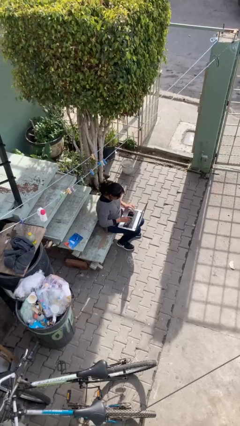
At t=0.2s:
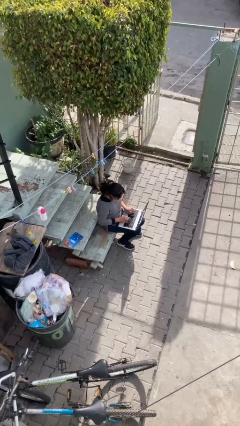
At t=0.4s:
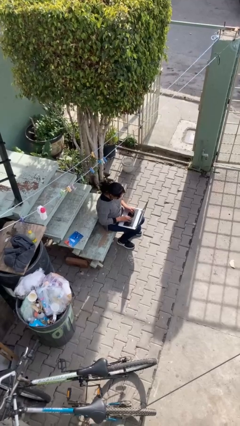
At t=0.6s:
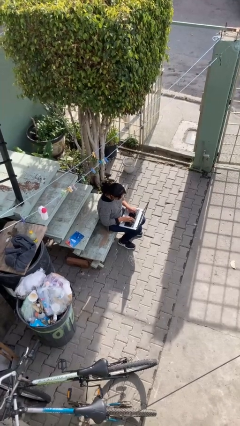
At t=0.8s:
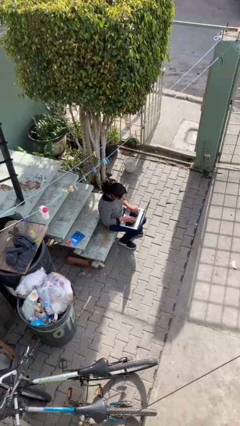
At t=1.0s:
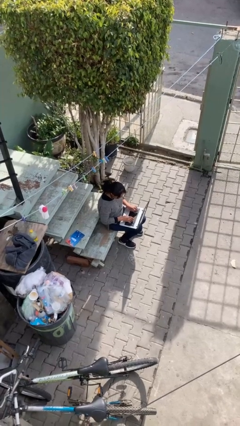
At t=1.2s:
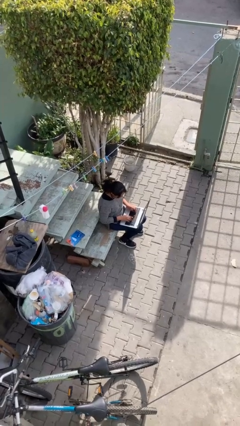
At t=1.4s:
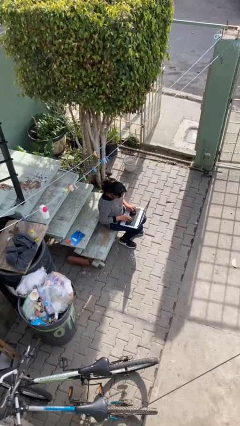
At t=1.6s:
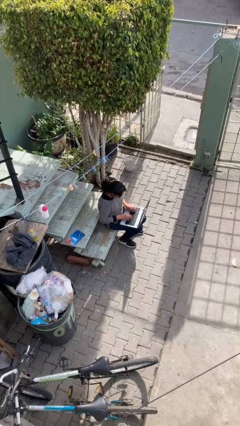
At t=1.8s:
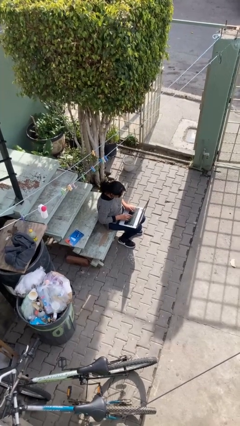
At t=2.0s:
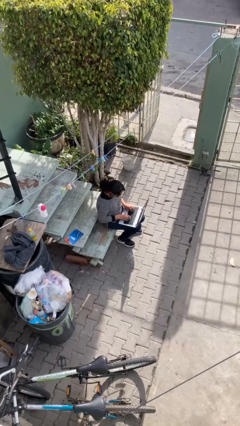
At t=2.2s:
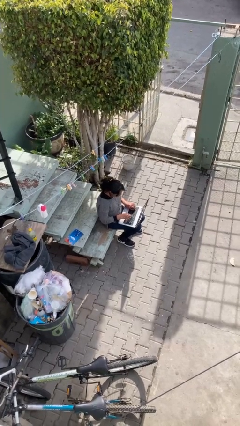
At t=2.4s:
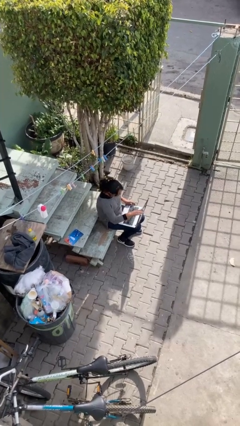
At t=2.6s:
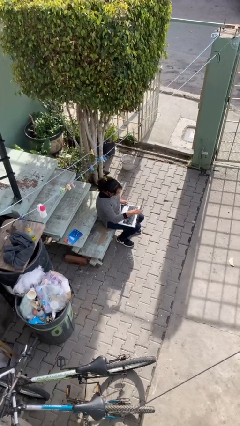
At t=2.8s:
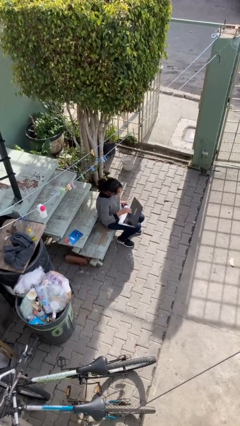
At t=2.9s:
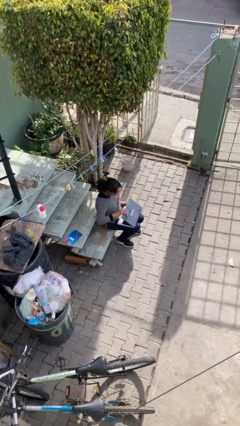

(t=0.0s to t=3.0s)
person interacts with laptop

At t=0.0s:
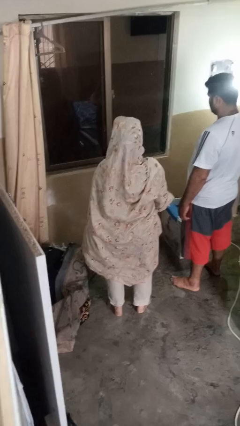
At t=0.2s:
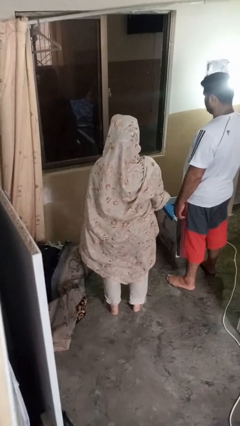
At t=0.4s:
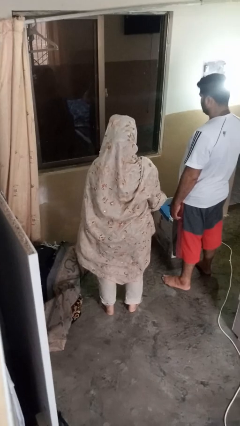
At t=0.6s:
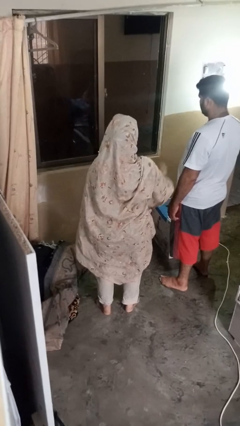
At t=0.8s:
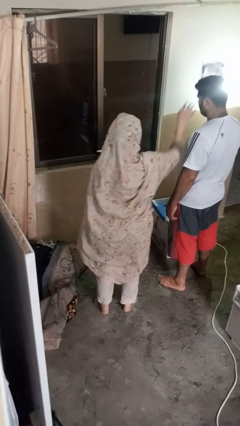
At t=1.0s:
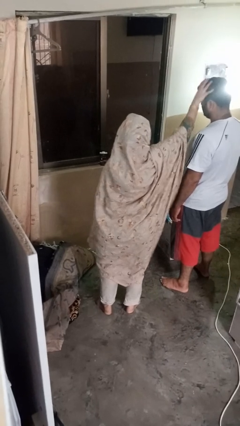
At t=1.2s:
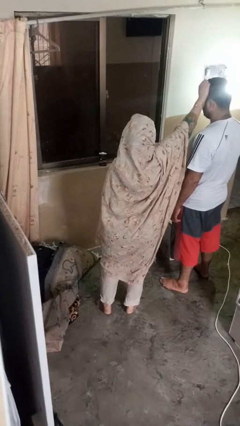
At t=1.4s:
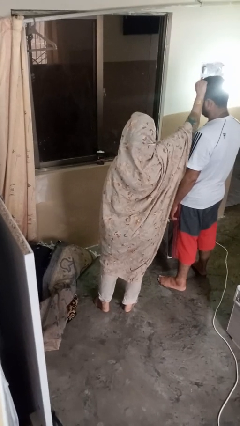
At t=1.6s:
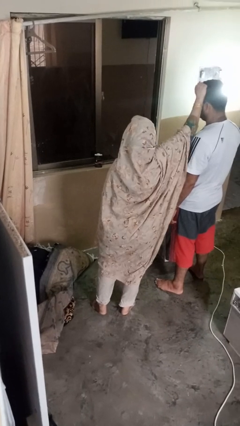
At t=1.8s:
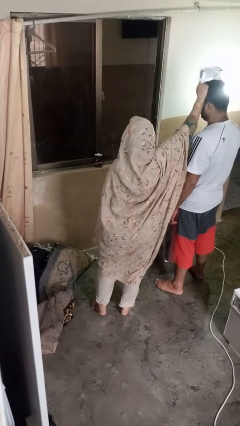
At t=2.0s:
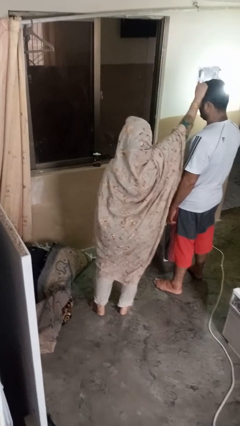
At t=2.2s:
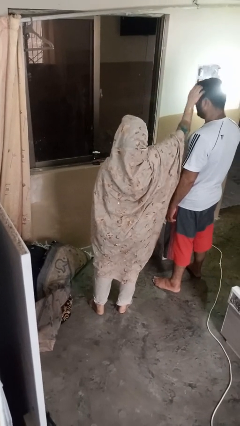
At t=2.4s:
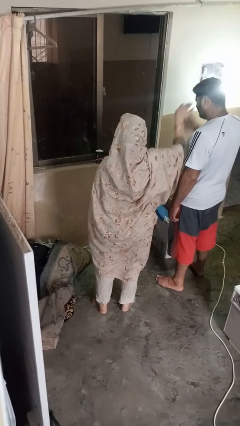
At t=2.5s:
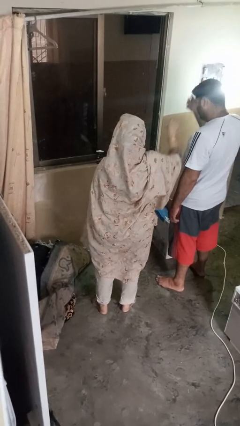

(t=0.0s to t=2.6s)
person grabs person by hair

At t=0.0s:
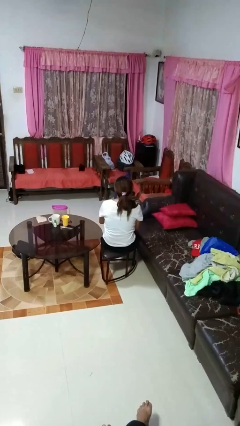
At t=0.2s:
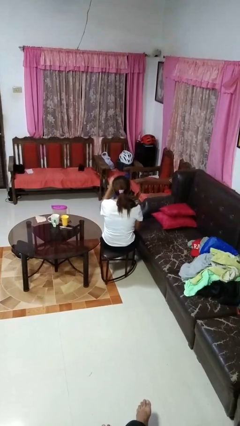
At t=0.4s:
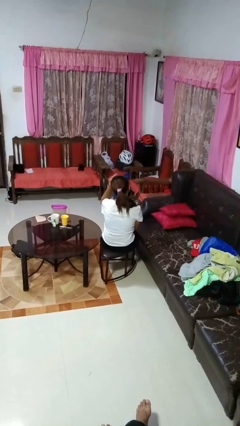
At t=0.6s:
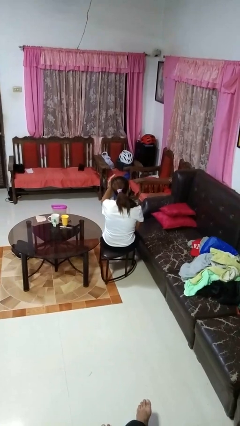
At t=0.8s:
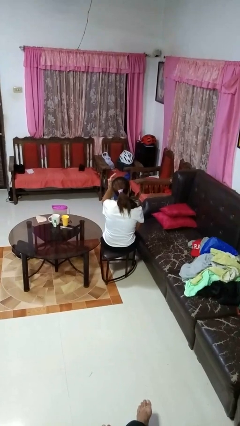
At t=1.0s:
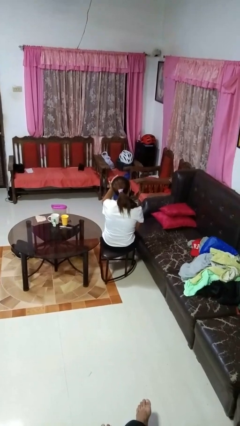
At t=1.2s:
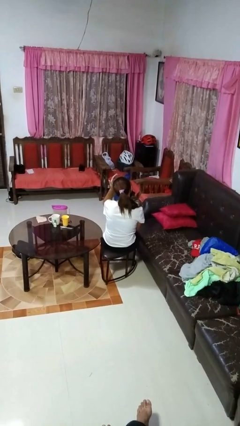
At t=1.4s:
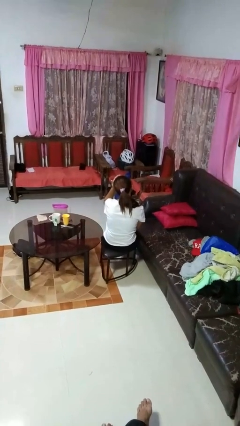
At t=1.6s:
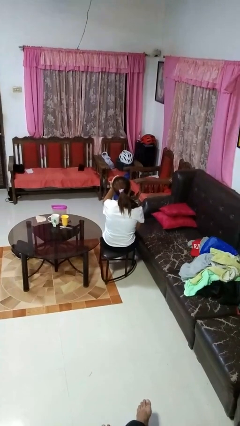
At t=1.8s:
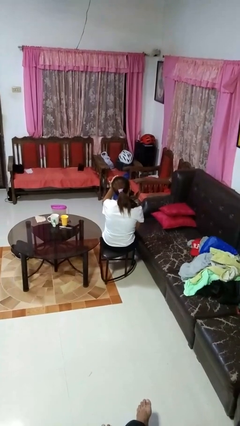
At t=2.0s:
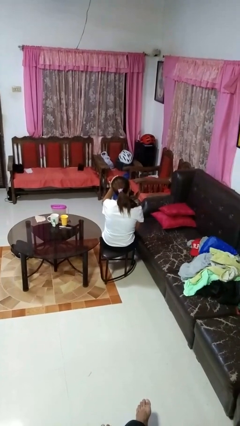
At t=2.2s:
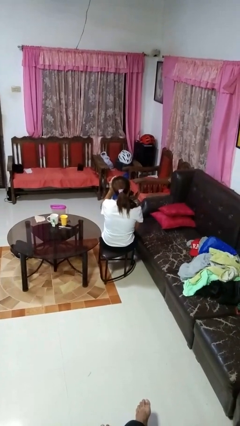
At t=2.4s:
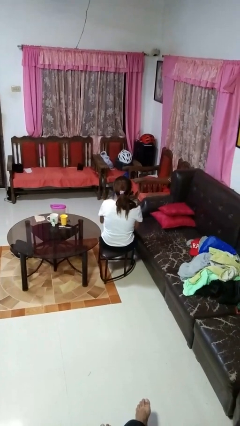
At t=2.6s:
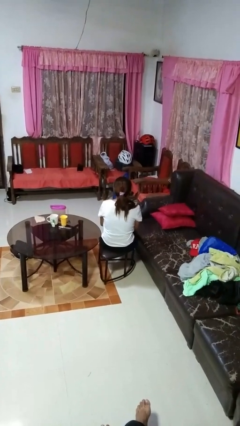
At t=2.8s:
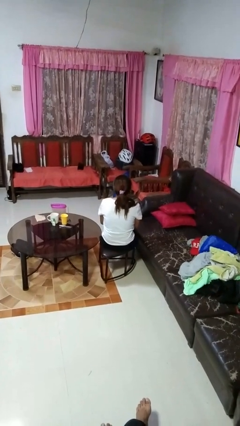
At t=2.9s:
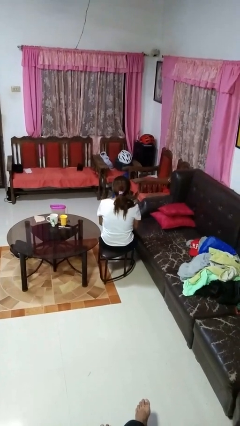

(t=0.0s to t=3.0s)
person pats head

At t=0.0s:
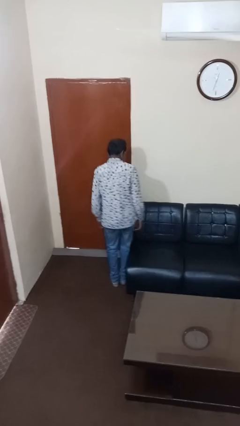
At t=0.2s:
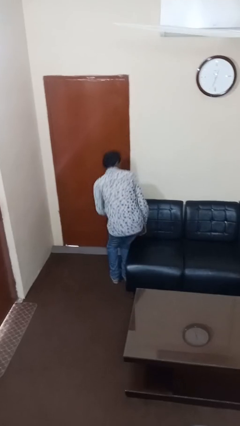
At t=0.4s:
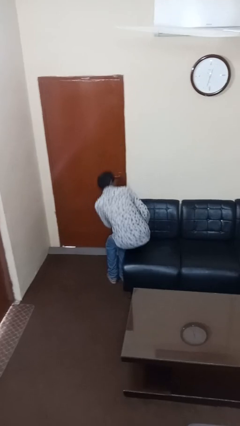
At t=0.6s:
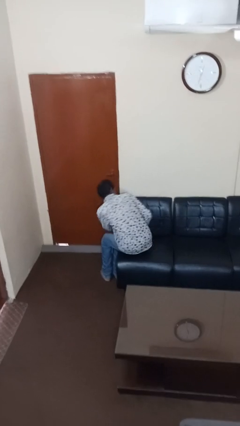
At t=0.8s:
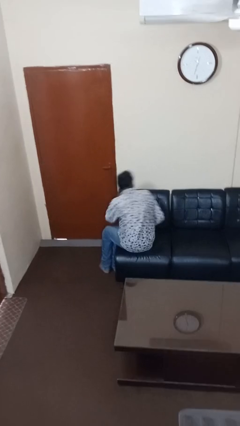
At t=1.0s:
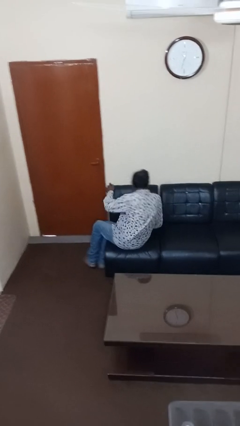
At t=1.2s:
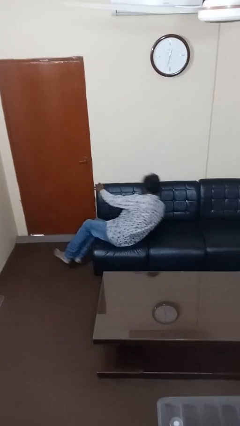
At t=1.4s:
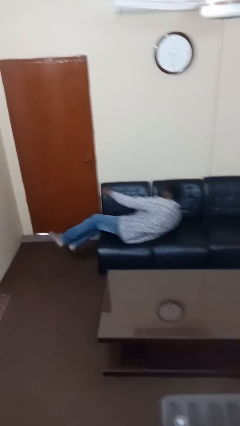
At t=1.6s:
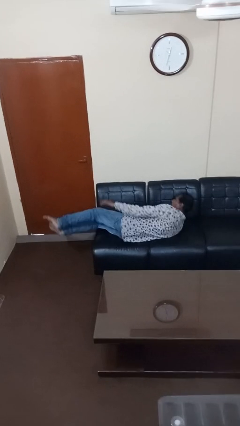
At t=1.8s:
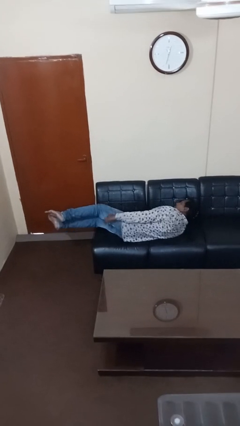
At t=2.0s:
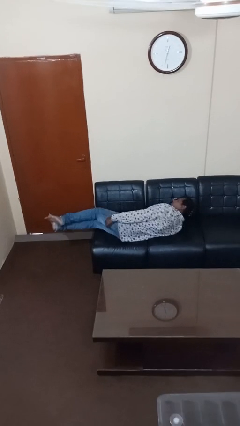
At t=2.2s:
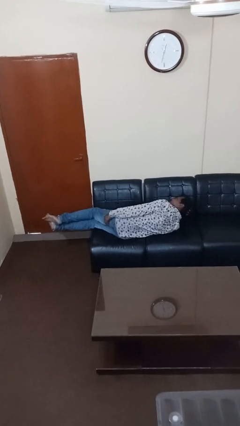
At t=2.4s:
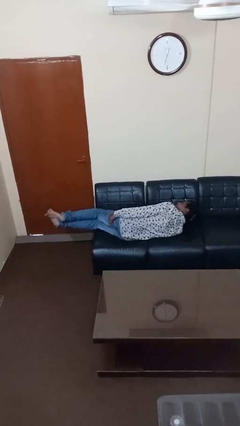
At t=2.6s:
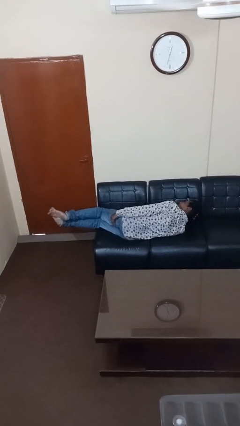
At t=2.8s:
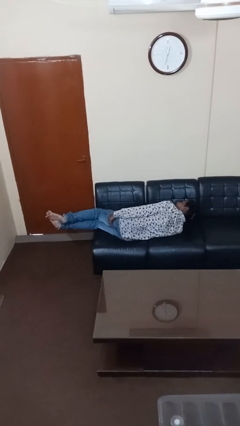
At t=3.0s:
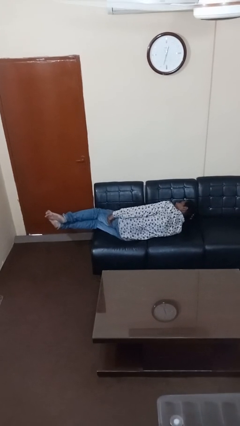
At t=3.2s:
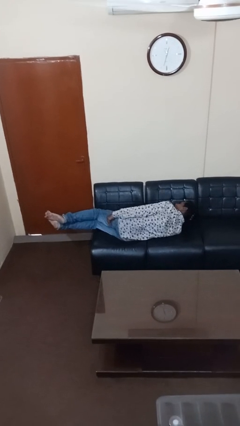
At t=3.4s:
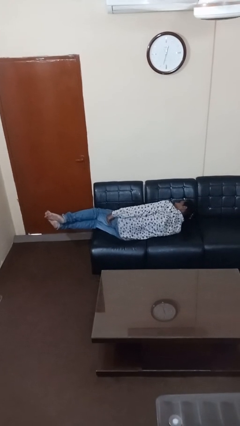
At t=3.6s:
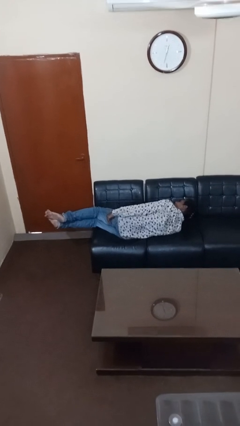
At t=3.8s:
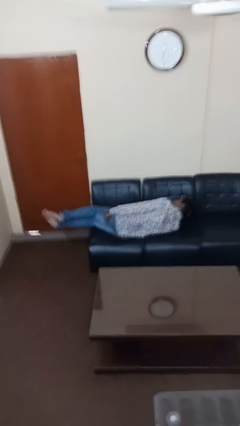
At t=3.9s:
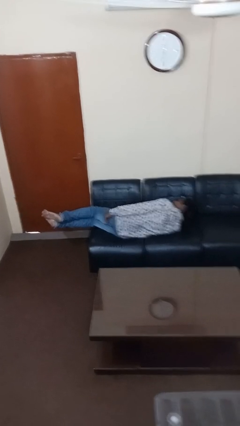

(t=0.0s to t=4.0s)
person lies down on couch

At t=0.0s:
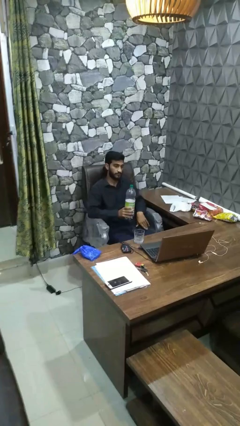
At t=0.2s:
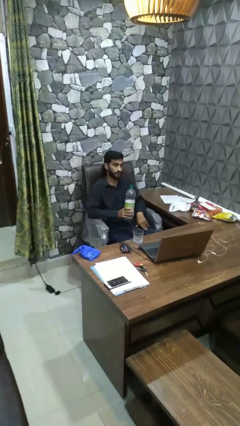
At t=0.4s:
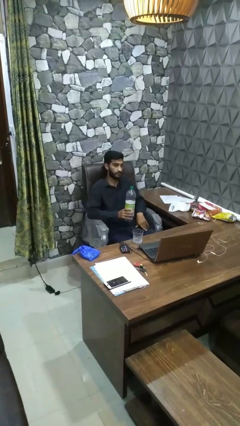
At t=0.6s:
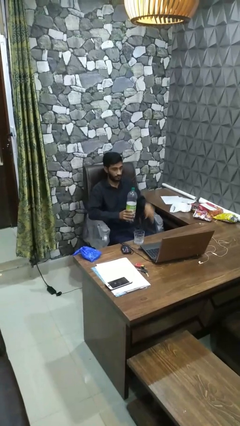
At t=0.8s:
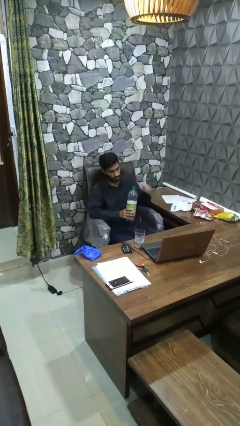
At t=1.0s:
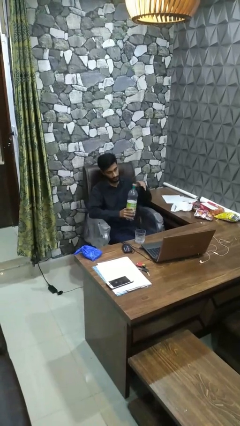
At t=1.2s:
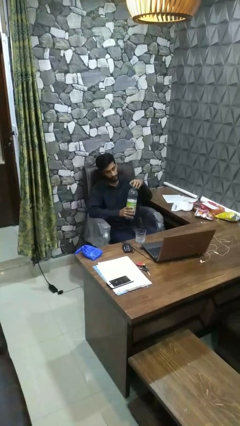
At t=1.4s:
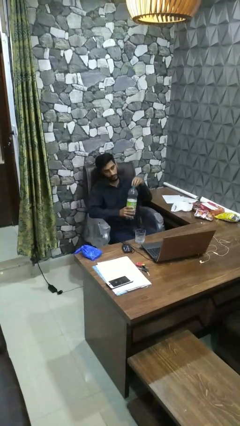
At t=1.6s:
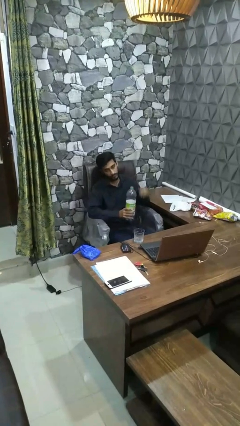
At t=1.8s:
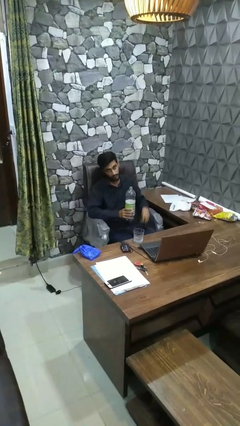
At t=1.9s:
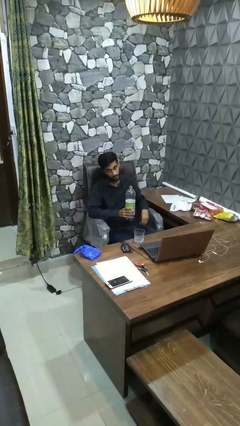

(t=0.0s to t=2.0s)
person unscrews lid from bottle

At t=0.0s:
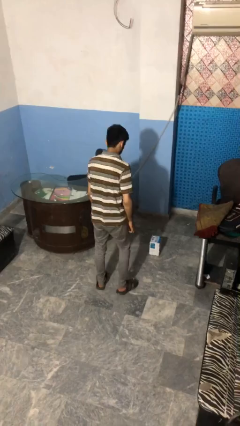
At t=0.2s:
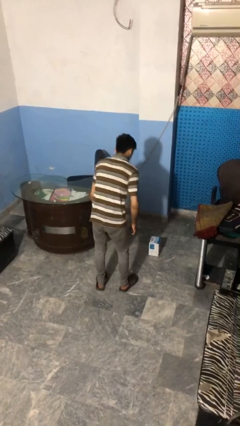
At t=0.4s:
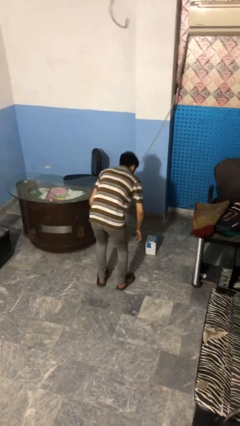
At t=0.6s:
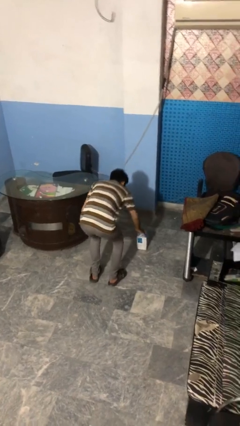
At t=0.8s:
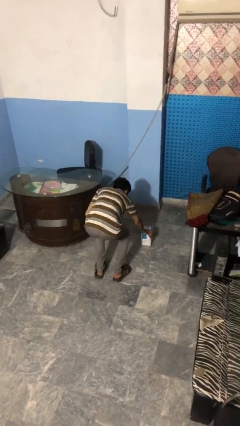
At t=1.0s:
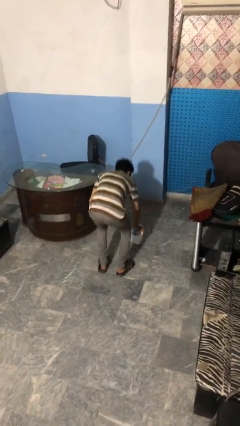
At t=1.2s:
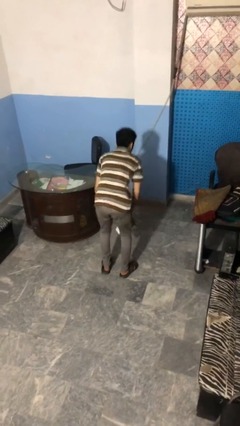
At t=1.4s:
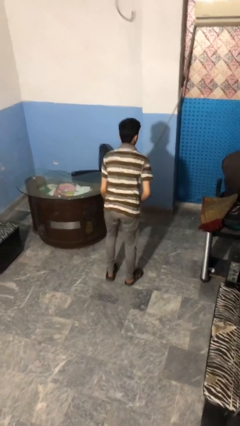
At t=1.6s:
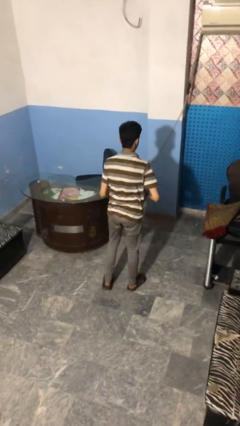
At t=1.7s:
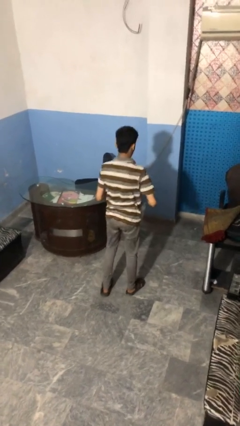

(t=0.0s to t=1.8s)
person picks up object from floor

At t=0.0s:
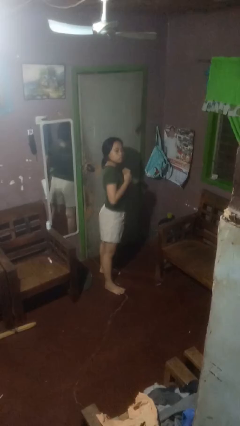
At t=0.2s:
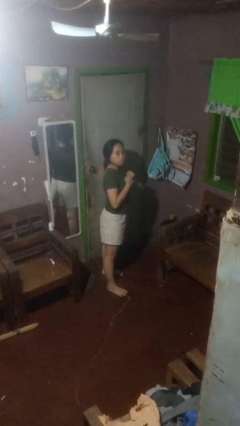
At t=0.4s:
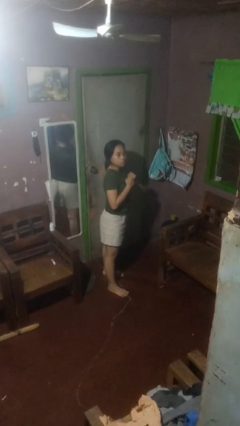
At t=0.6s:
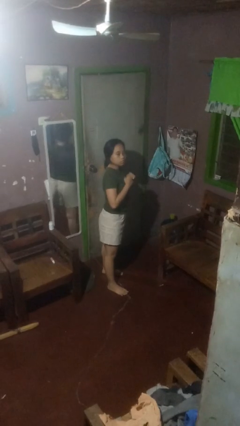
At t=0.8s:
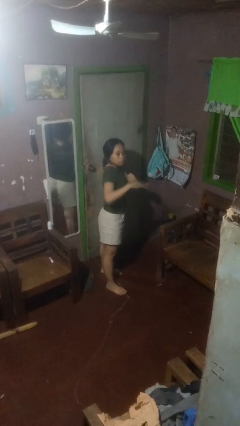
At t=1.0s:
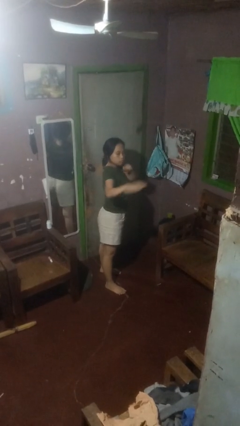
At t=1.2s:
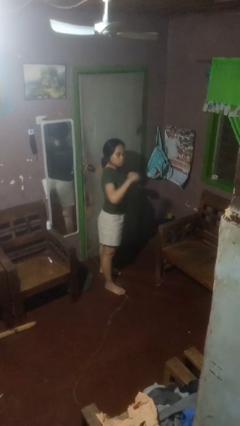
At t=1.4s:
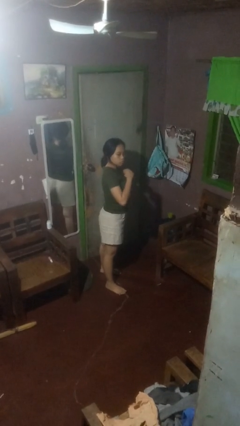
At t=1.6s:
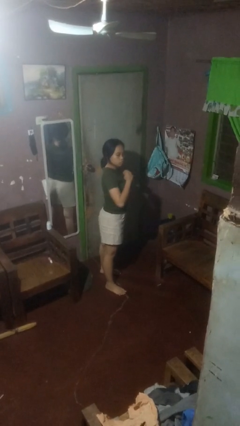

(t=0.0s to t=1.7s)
person karate chop
